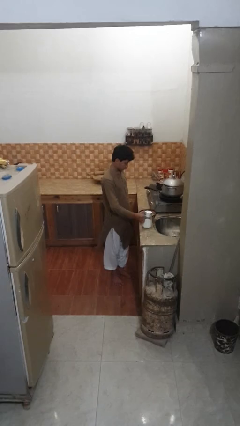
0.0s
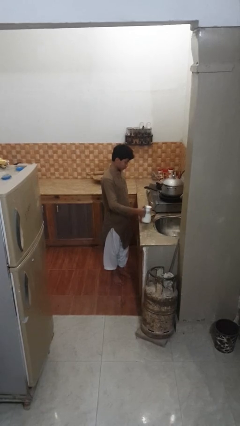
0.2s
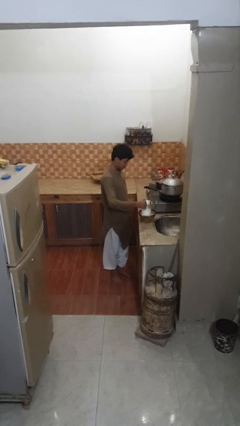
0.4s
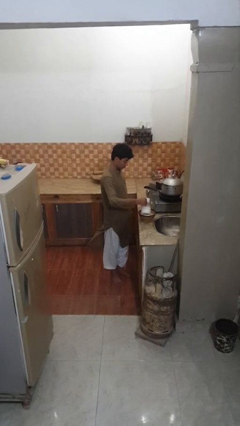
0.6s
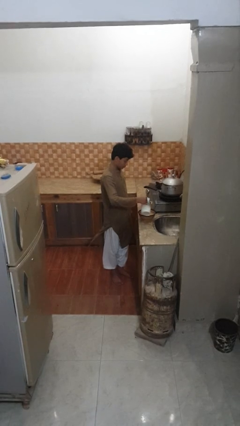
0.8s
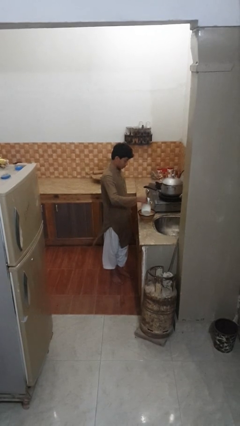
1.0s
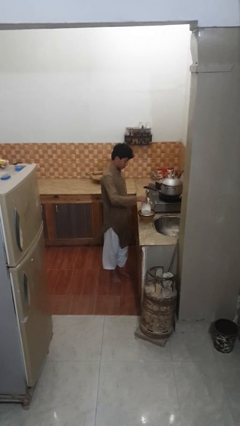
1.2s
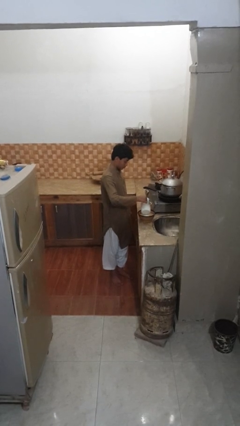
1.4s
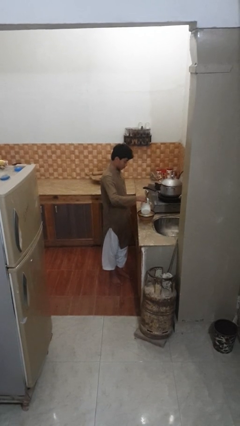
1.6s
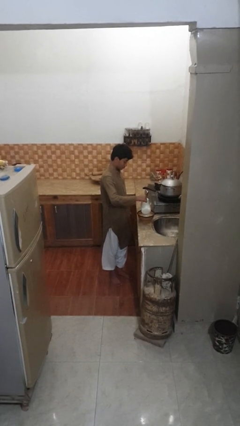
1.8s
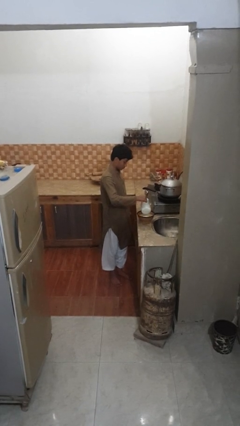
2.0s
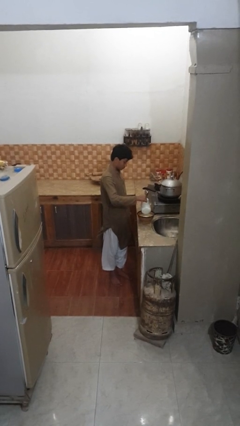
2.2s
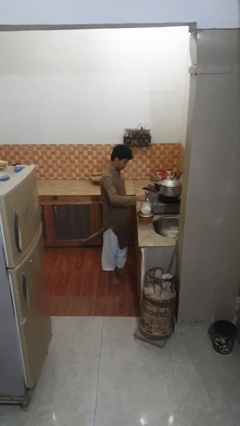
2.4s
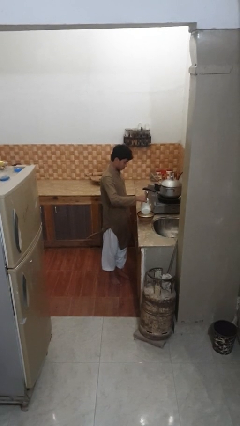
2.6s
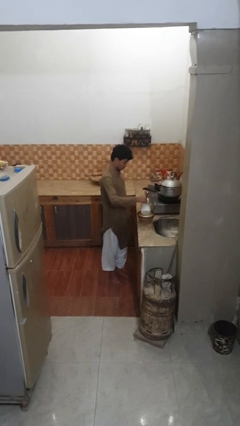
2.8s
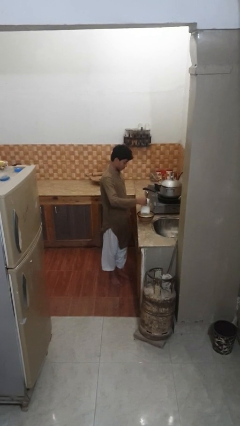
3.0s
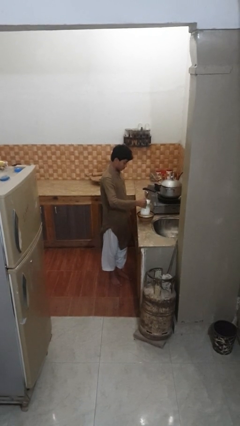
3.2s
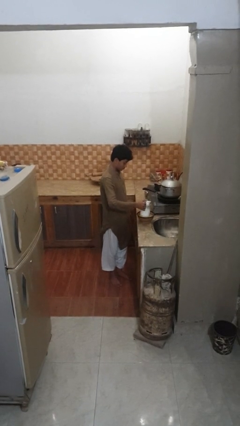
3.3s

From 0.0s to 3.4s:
person pours into bowl

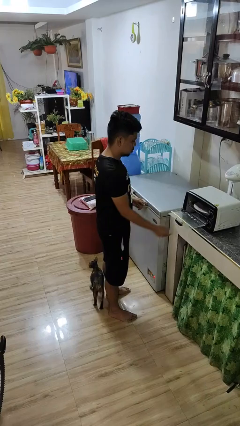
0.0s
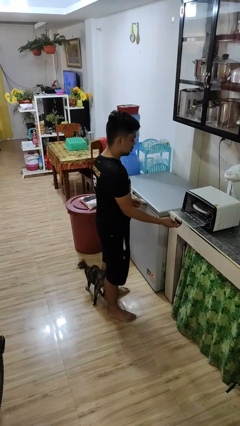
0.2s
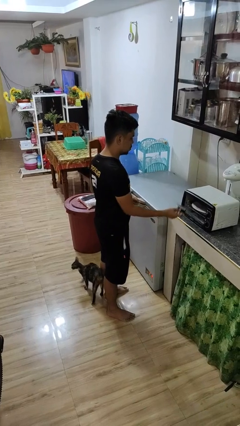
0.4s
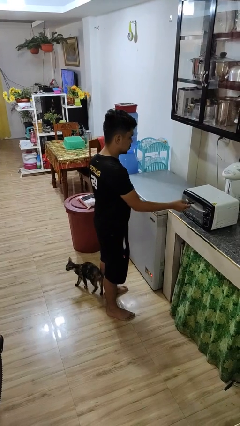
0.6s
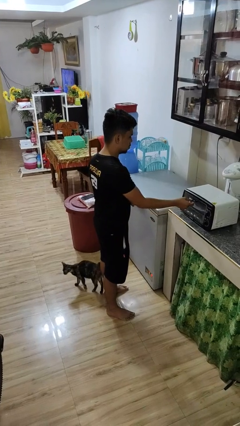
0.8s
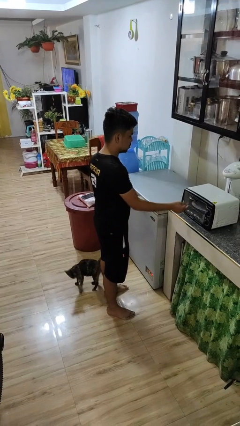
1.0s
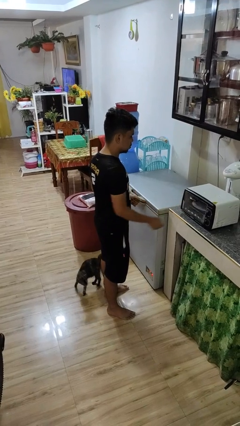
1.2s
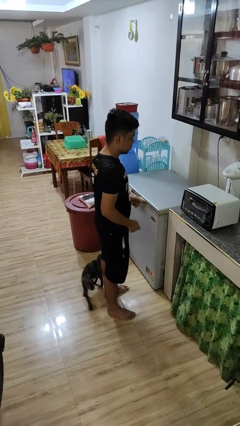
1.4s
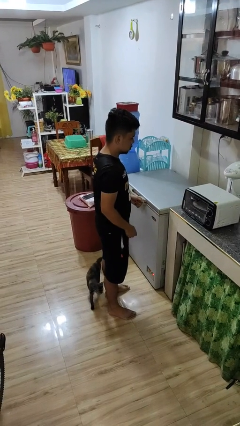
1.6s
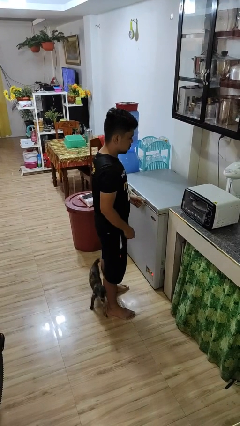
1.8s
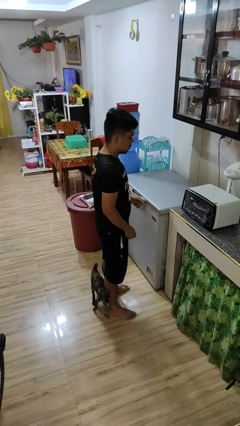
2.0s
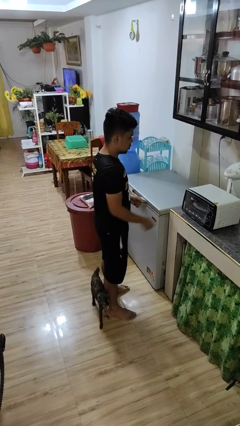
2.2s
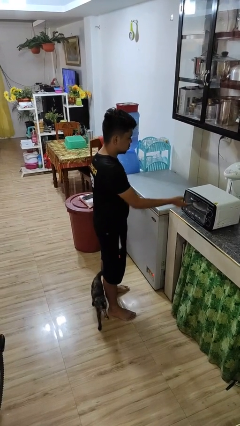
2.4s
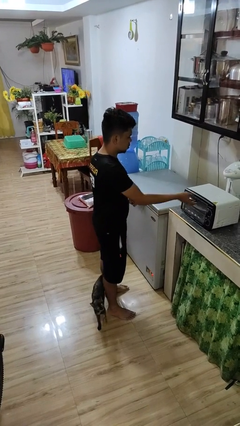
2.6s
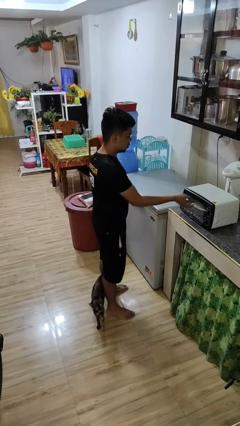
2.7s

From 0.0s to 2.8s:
person closes microwave

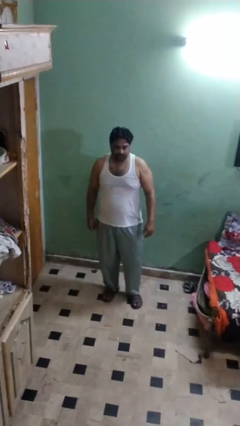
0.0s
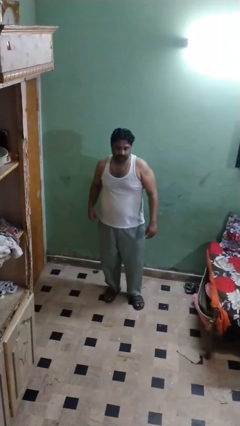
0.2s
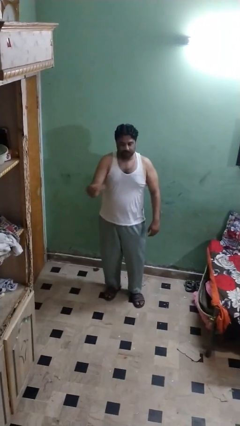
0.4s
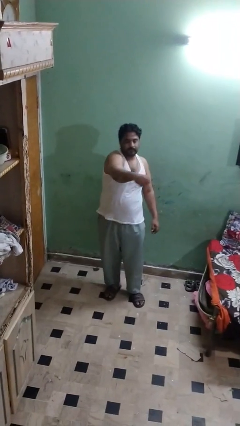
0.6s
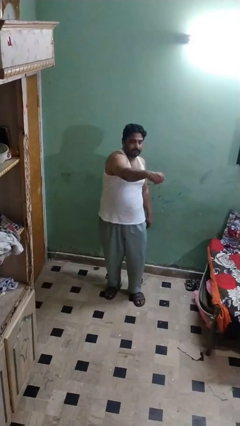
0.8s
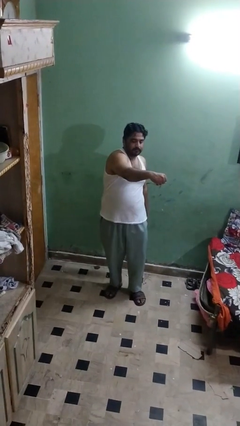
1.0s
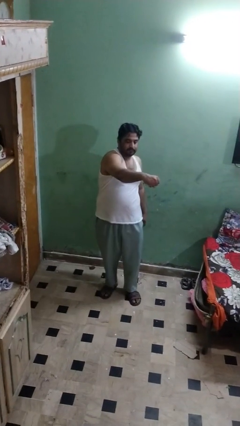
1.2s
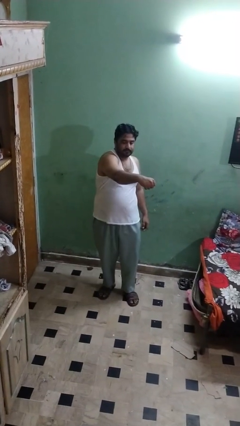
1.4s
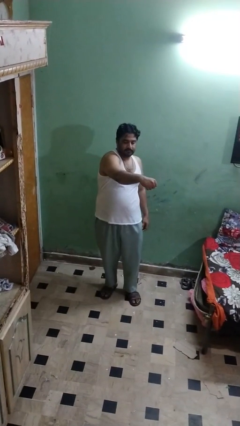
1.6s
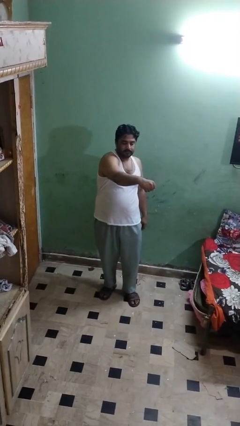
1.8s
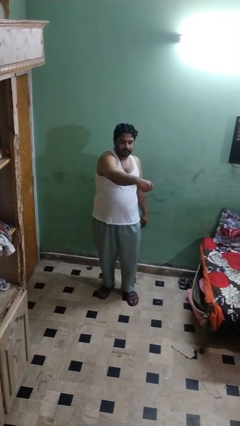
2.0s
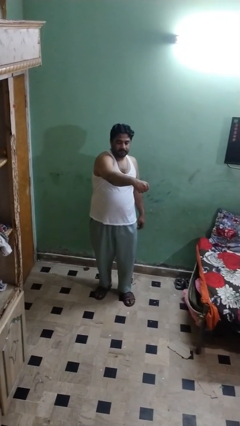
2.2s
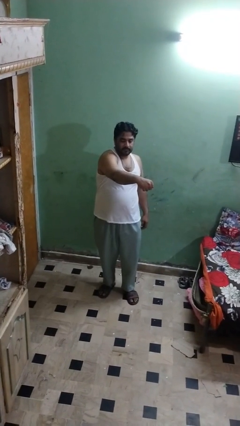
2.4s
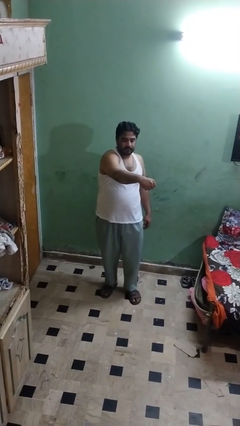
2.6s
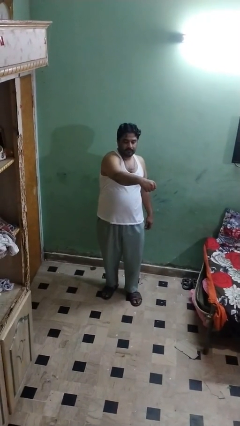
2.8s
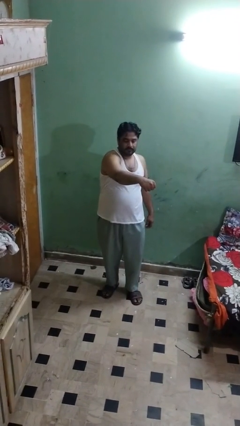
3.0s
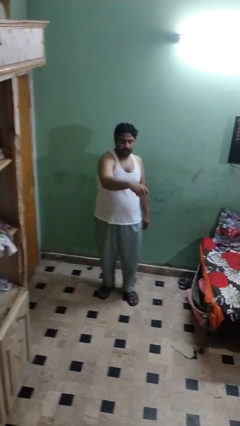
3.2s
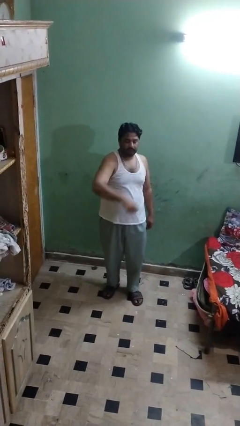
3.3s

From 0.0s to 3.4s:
person punches

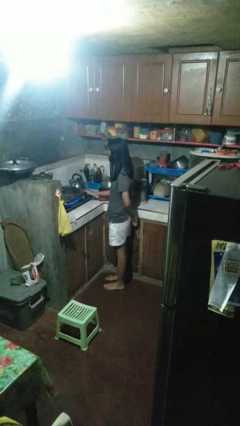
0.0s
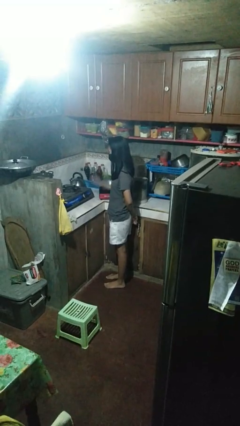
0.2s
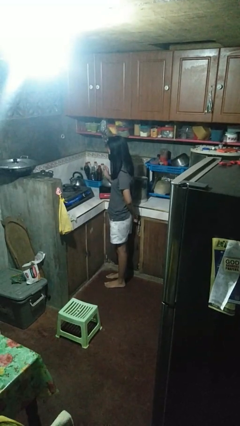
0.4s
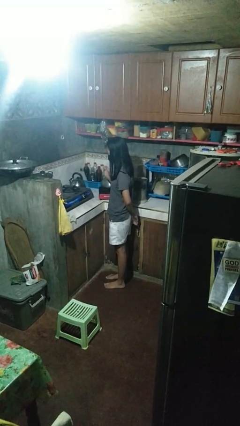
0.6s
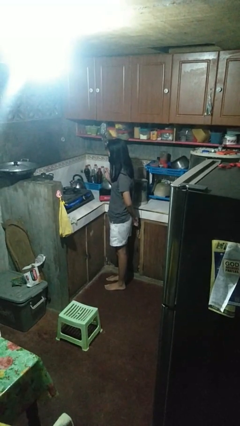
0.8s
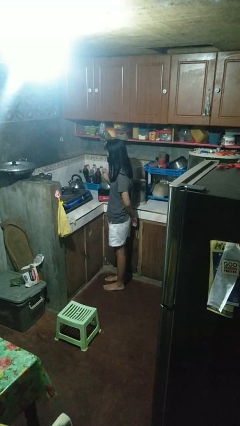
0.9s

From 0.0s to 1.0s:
person burns hand

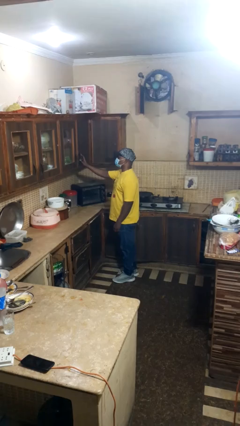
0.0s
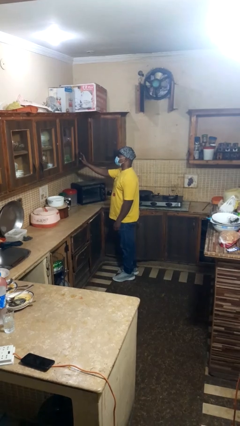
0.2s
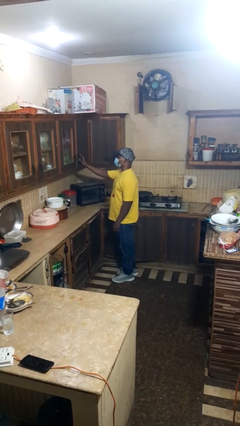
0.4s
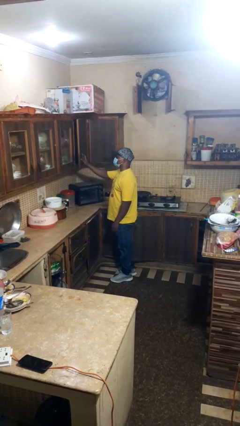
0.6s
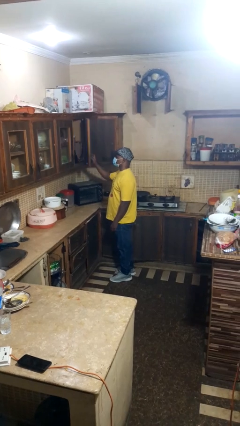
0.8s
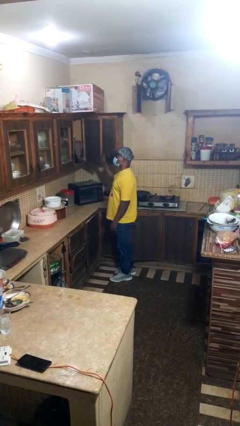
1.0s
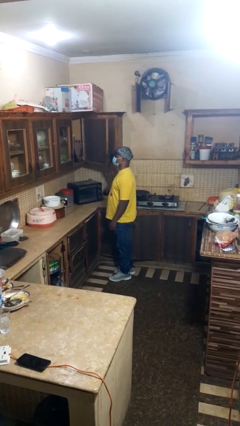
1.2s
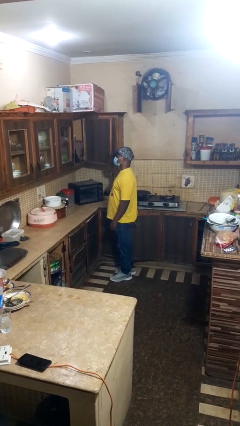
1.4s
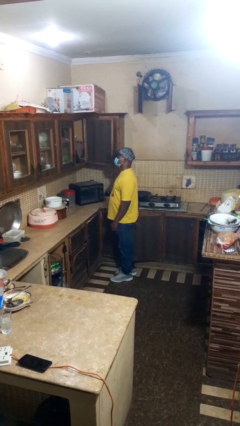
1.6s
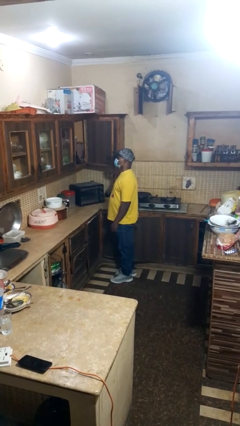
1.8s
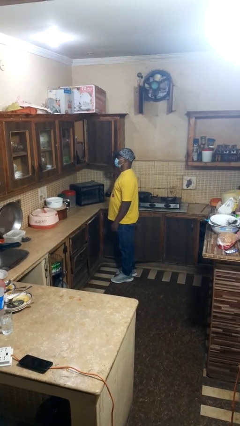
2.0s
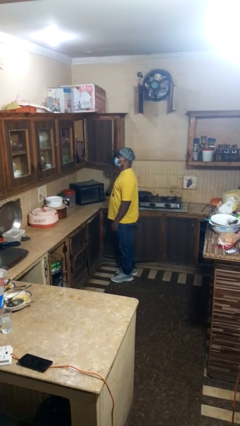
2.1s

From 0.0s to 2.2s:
person opens cabinet

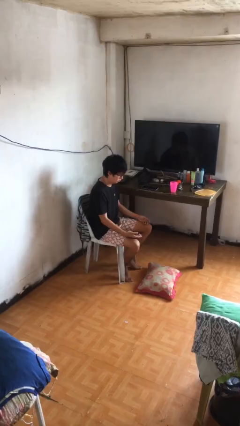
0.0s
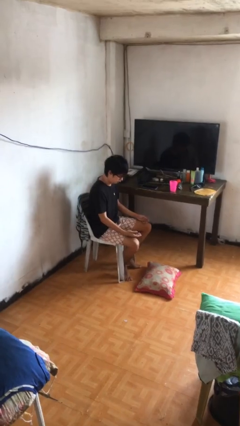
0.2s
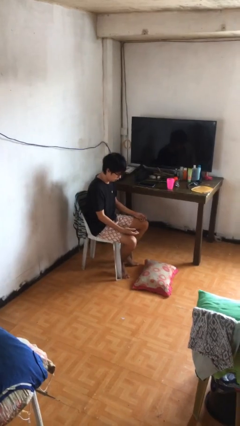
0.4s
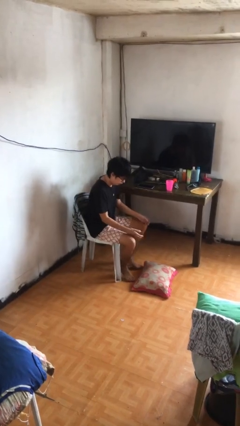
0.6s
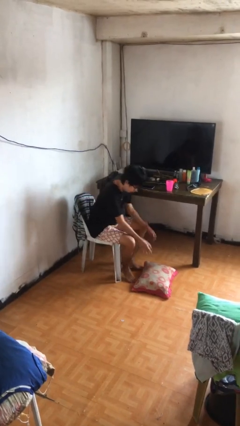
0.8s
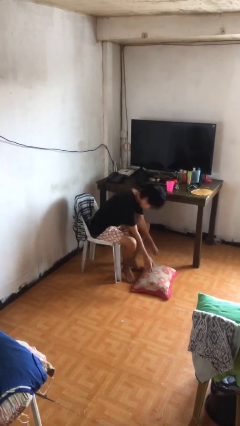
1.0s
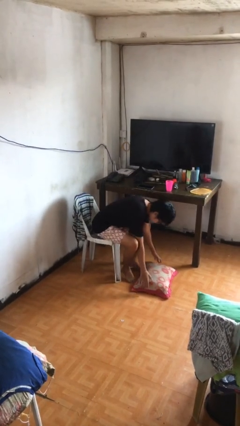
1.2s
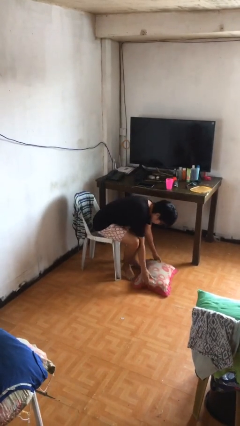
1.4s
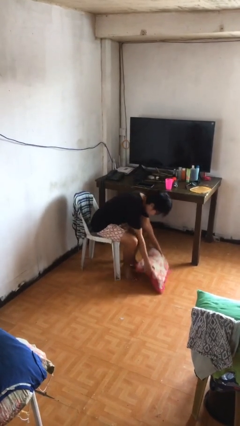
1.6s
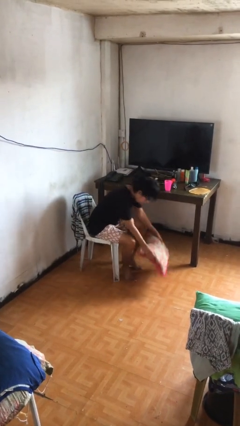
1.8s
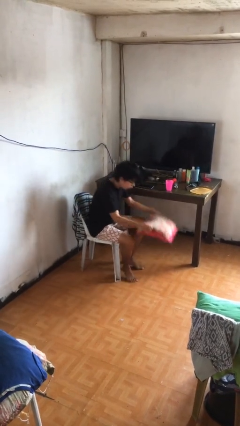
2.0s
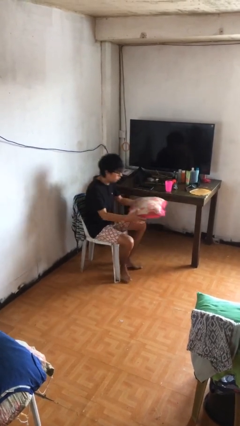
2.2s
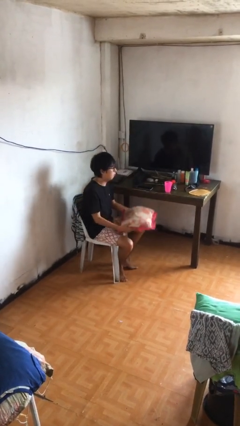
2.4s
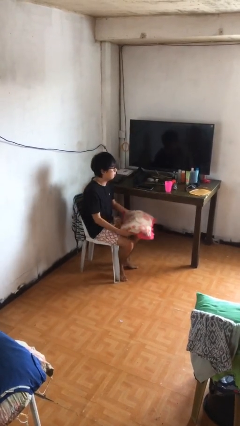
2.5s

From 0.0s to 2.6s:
person picks up object from floor

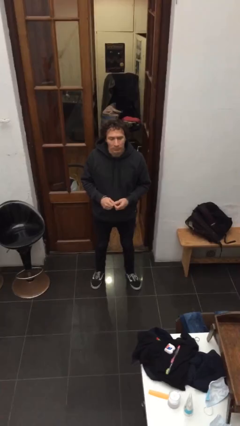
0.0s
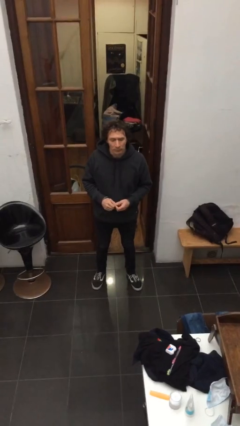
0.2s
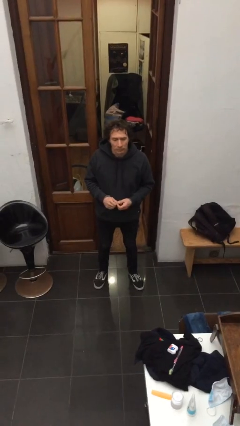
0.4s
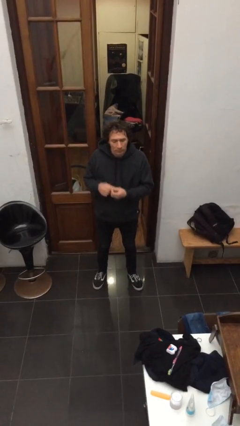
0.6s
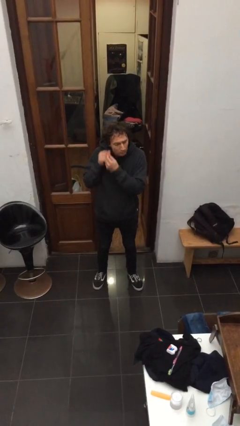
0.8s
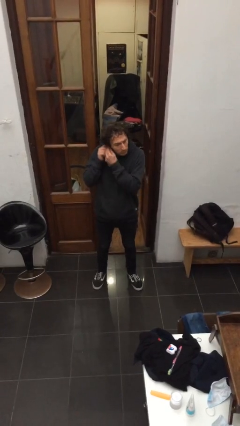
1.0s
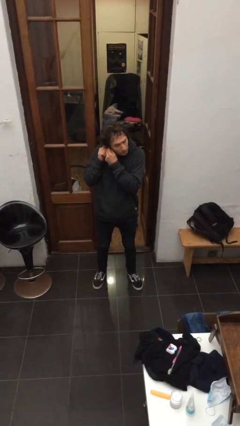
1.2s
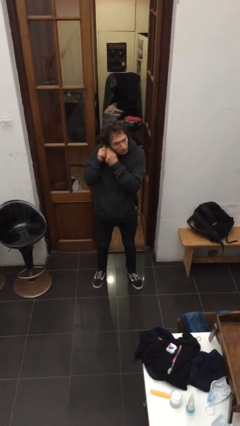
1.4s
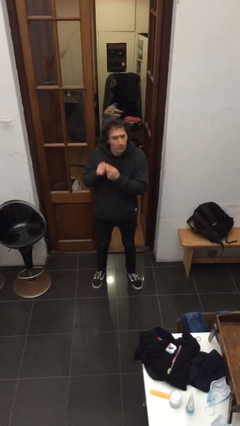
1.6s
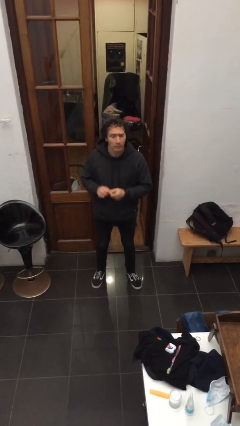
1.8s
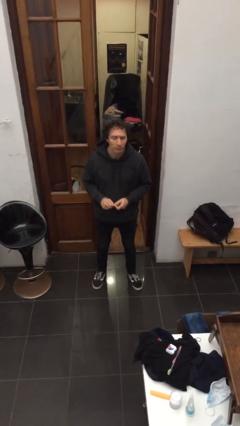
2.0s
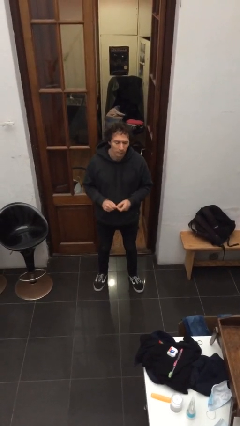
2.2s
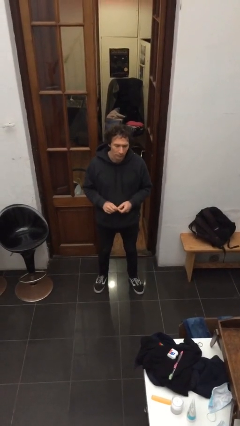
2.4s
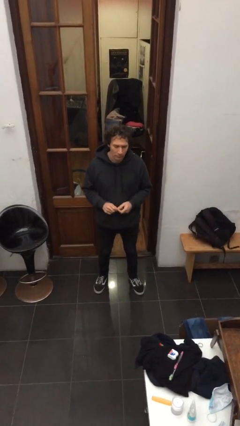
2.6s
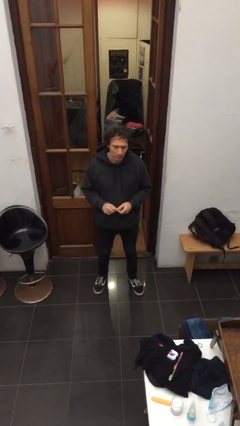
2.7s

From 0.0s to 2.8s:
person takes off earrings
